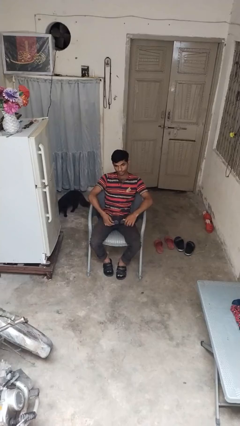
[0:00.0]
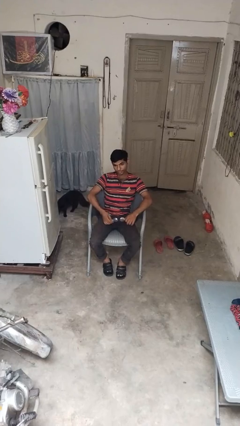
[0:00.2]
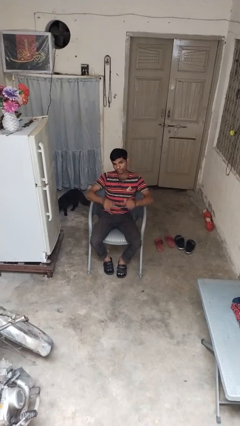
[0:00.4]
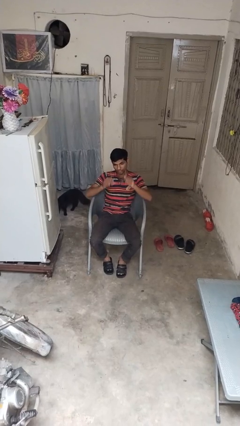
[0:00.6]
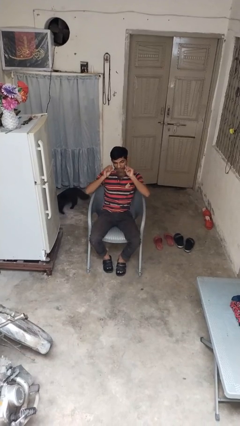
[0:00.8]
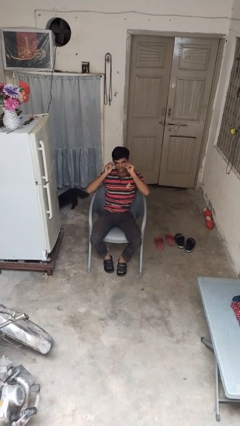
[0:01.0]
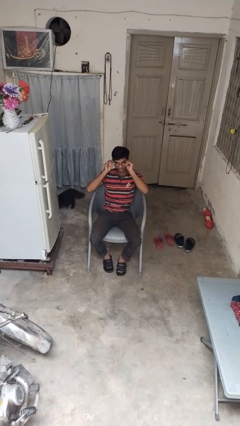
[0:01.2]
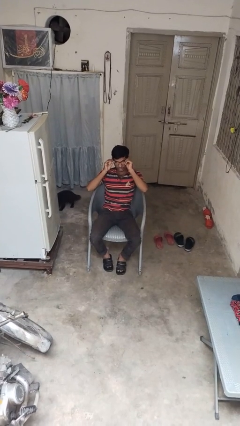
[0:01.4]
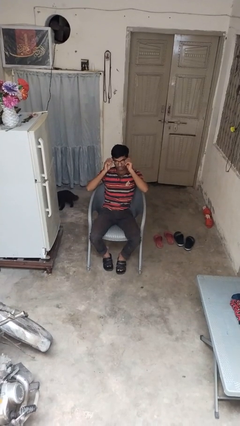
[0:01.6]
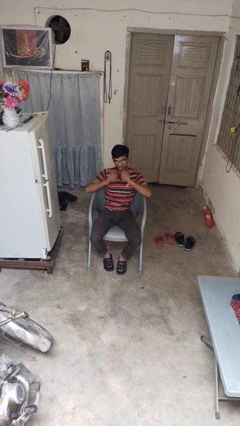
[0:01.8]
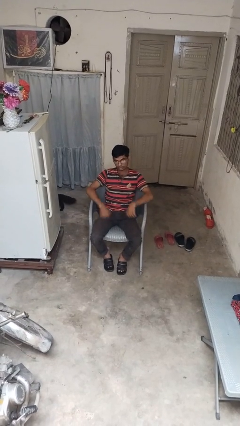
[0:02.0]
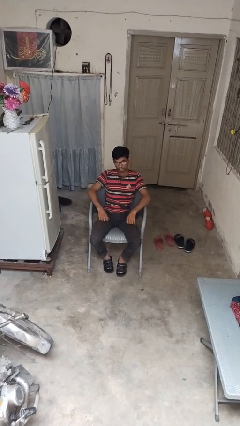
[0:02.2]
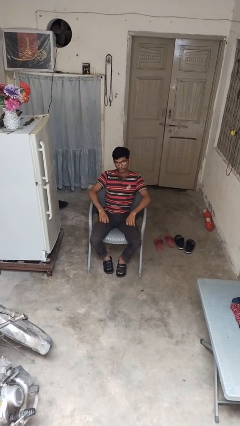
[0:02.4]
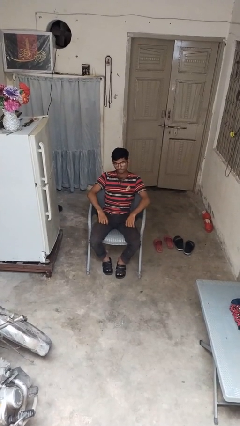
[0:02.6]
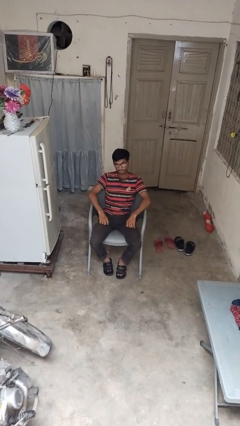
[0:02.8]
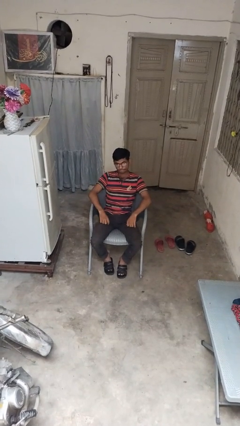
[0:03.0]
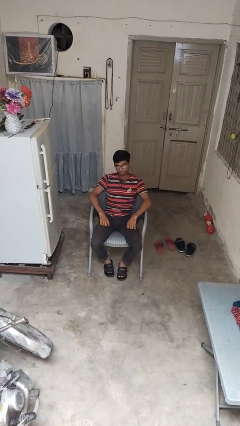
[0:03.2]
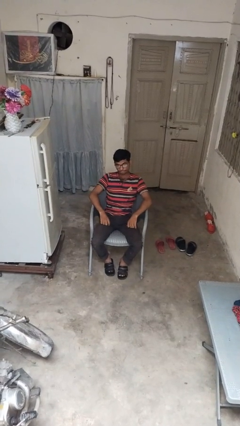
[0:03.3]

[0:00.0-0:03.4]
person puts on glasses

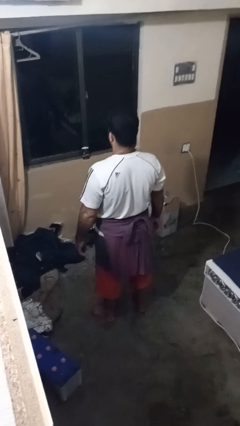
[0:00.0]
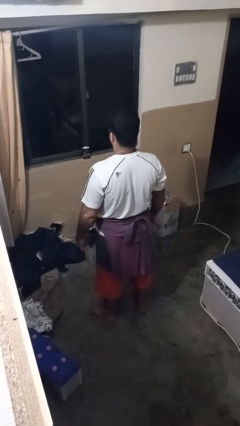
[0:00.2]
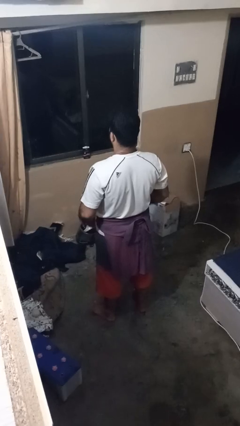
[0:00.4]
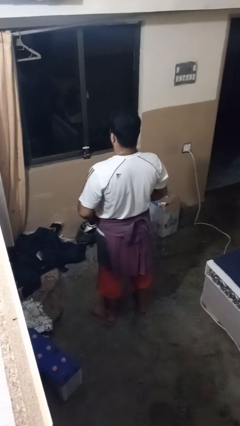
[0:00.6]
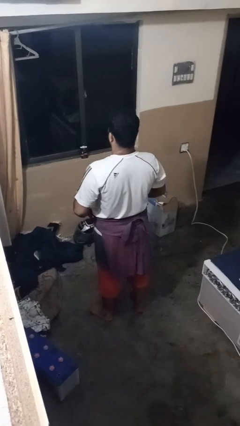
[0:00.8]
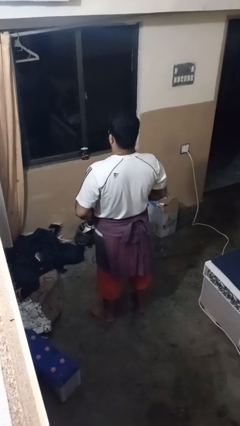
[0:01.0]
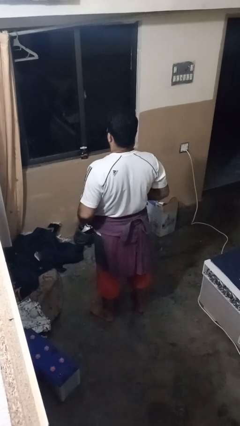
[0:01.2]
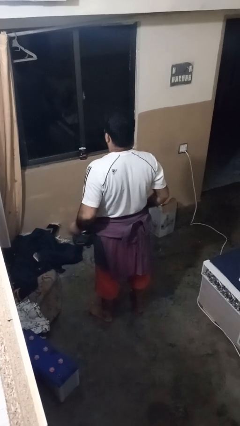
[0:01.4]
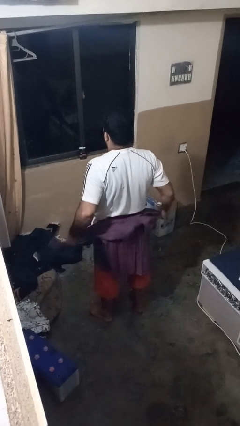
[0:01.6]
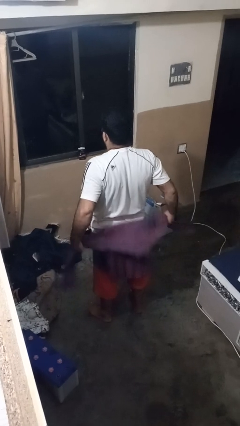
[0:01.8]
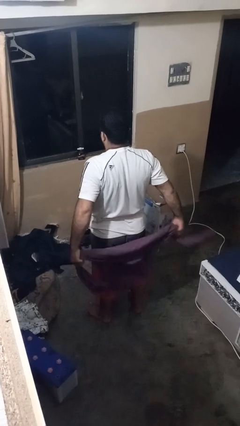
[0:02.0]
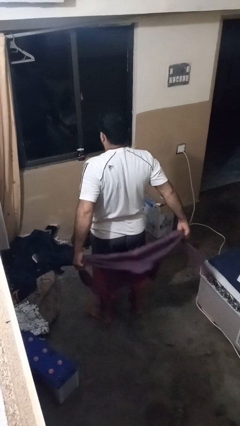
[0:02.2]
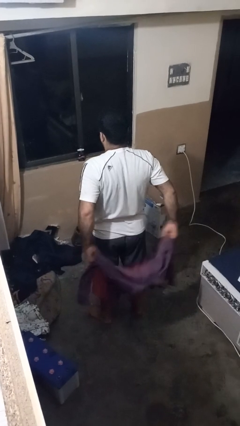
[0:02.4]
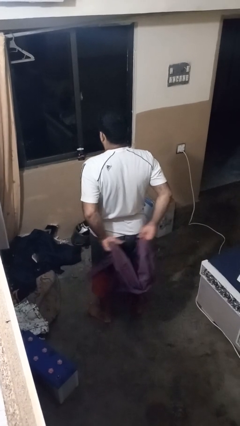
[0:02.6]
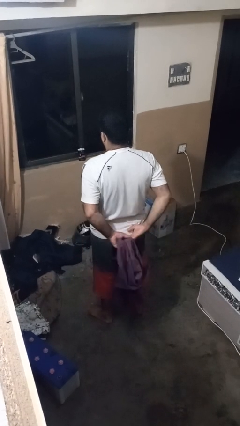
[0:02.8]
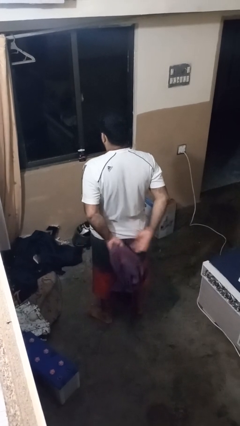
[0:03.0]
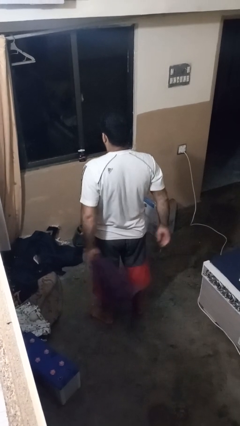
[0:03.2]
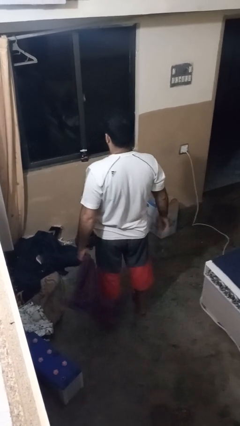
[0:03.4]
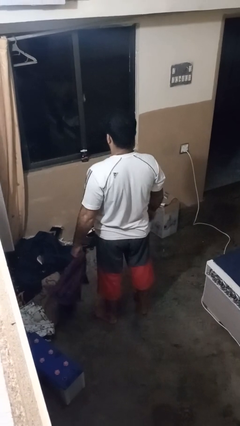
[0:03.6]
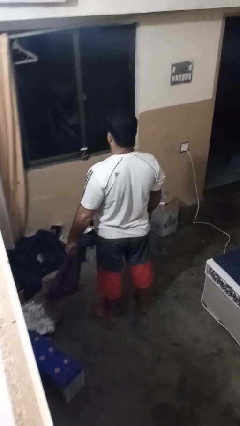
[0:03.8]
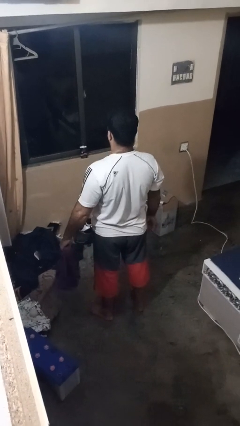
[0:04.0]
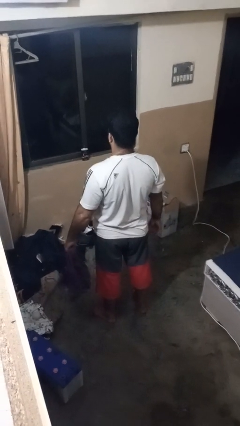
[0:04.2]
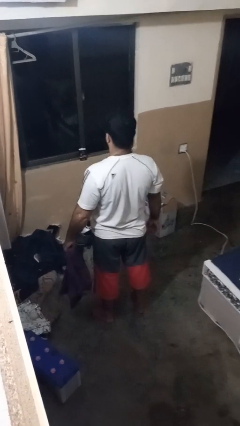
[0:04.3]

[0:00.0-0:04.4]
person unties jacket around waist

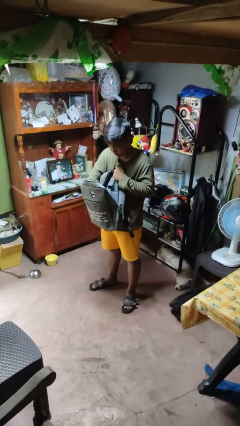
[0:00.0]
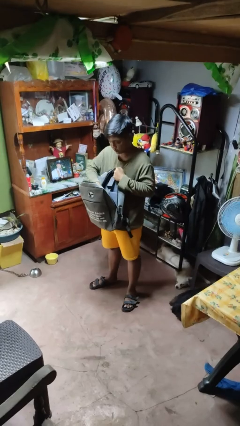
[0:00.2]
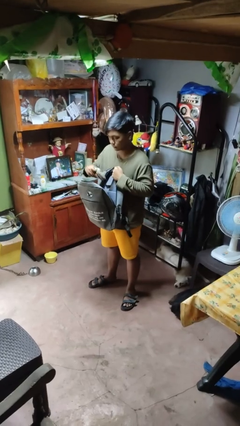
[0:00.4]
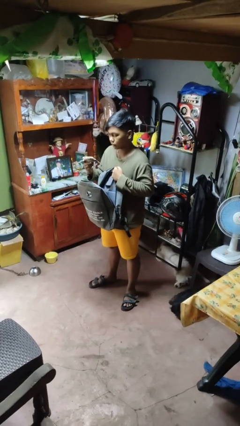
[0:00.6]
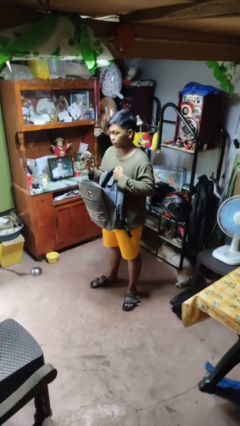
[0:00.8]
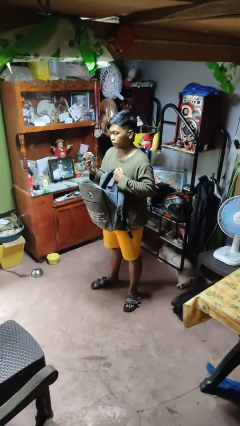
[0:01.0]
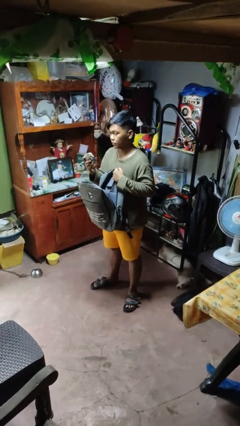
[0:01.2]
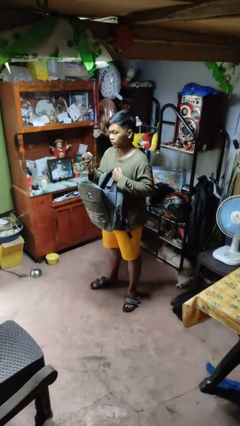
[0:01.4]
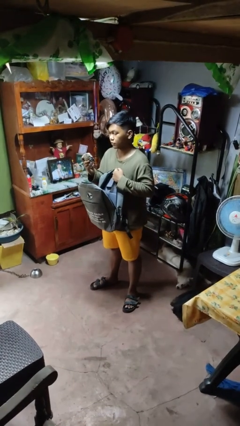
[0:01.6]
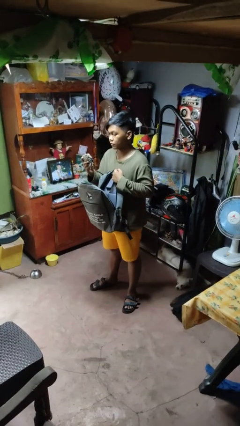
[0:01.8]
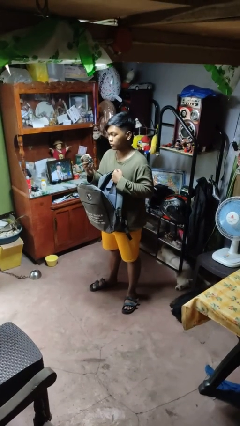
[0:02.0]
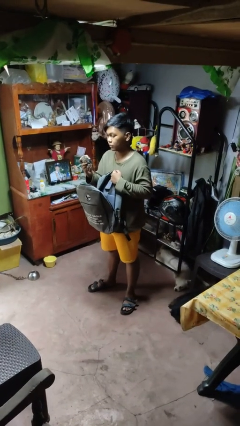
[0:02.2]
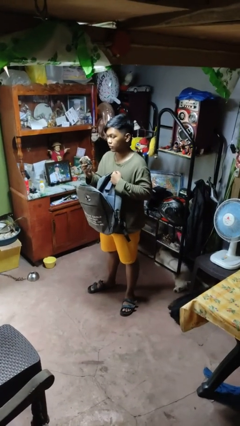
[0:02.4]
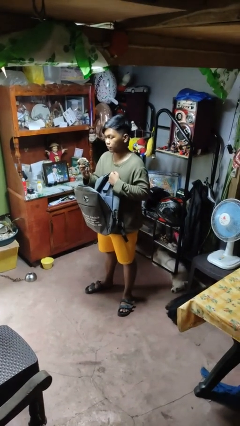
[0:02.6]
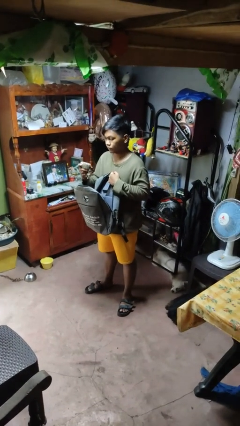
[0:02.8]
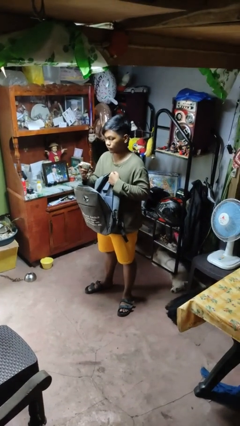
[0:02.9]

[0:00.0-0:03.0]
person takes object from backpack

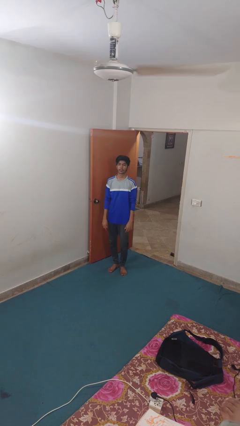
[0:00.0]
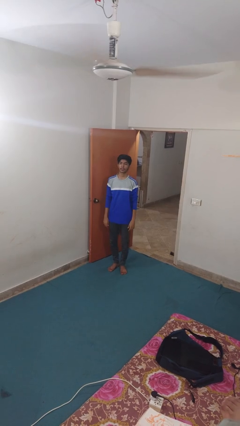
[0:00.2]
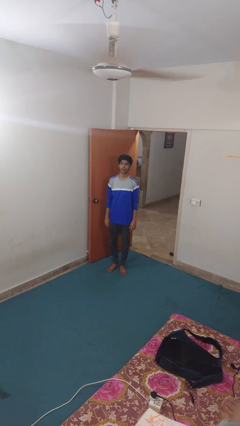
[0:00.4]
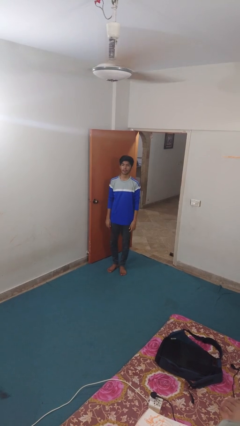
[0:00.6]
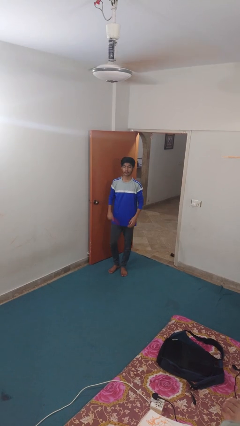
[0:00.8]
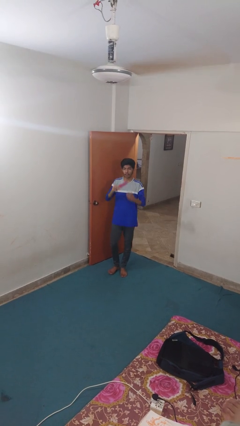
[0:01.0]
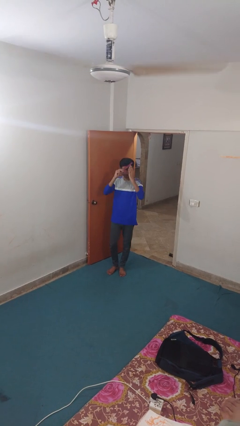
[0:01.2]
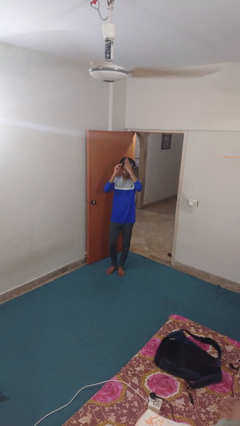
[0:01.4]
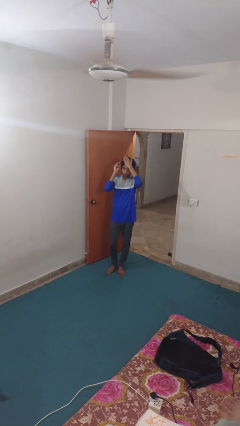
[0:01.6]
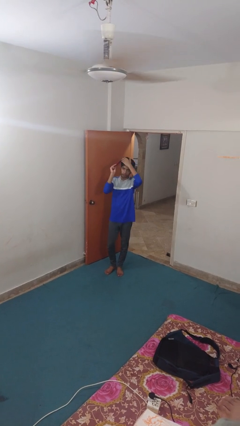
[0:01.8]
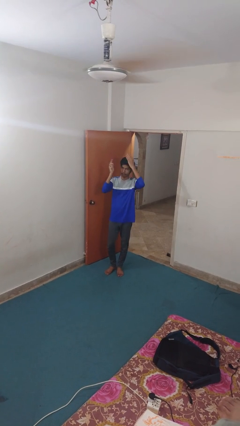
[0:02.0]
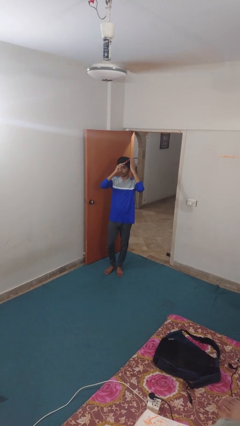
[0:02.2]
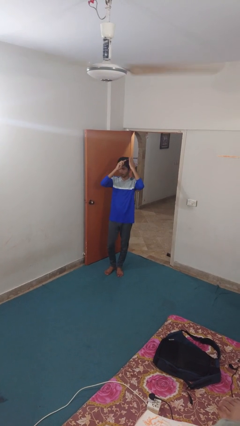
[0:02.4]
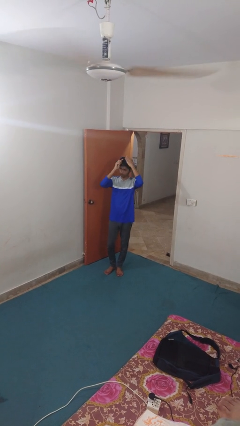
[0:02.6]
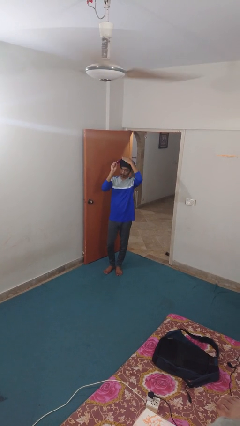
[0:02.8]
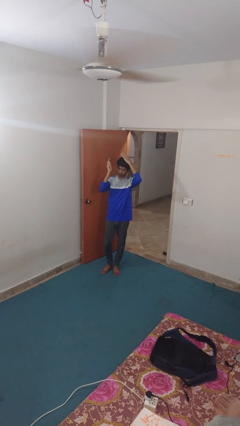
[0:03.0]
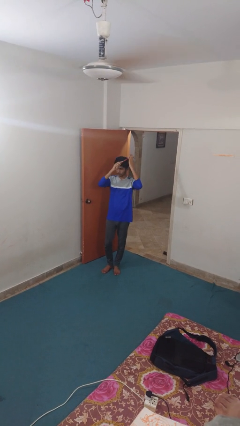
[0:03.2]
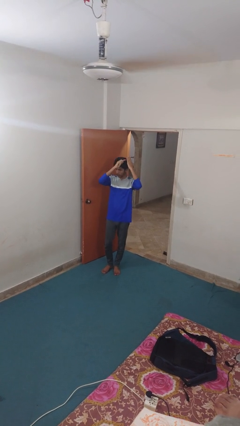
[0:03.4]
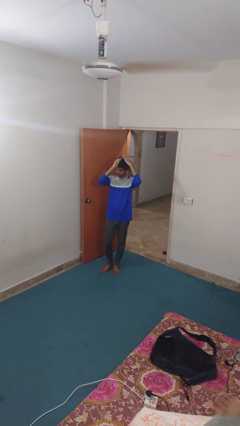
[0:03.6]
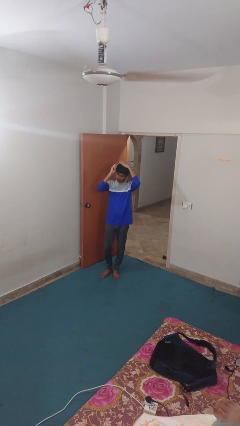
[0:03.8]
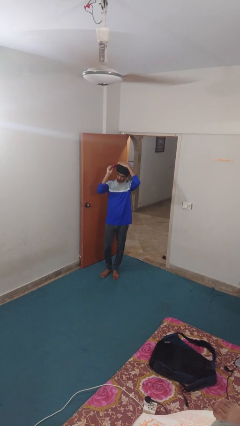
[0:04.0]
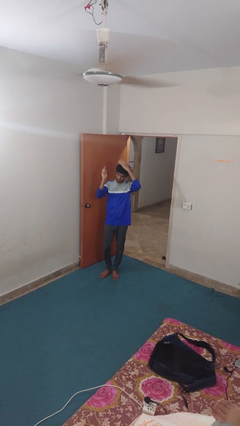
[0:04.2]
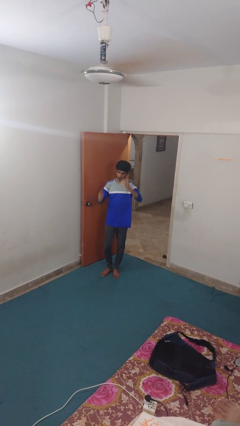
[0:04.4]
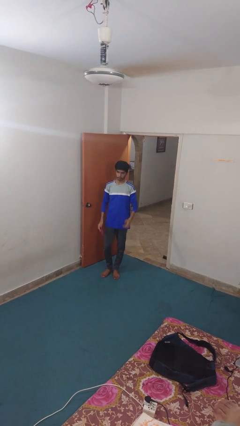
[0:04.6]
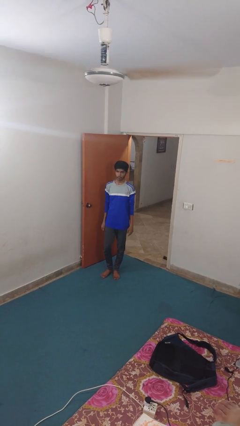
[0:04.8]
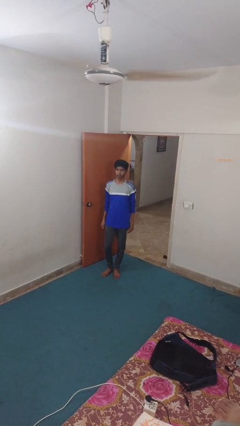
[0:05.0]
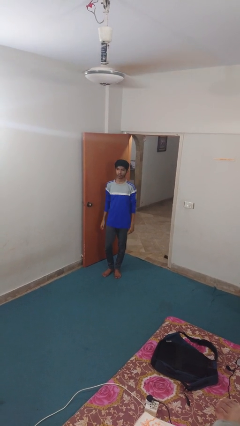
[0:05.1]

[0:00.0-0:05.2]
person brushes hair

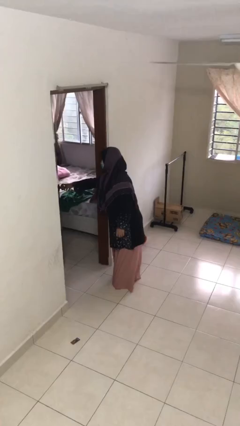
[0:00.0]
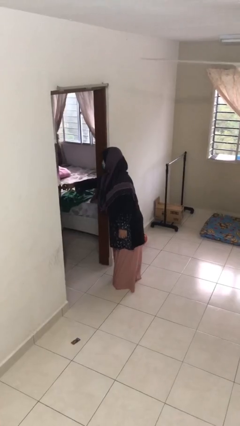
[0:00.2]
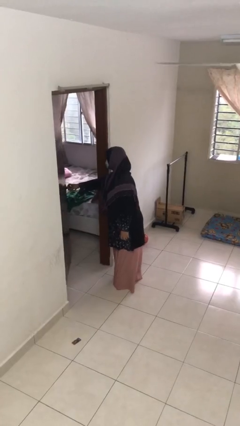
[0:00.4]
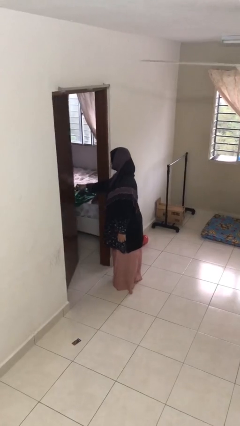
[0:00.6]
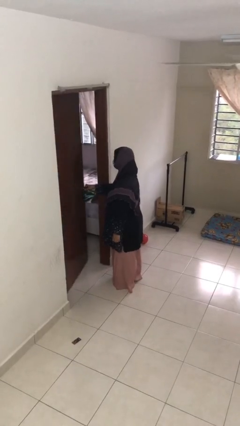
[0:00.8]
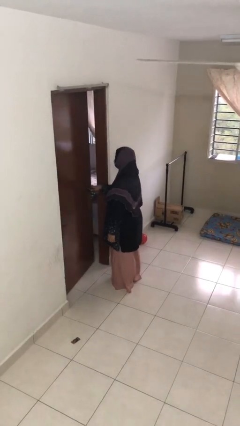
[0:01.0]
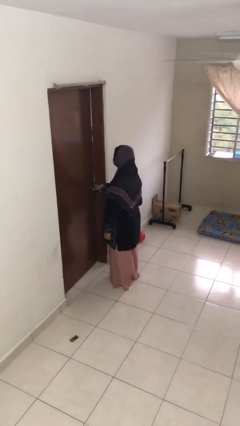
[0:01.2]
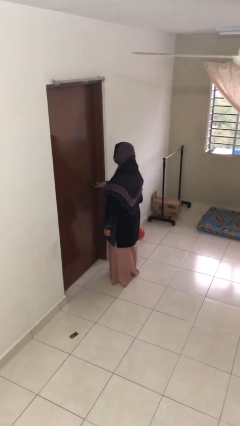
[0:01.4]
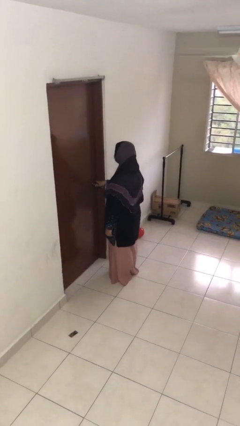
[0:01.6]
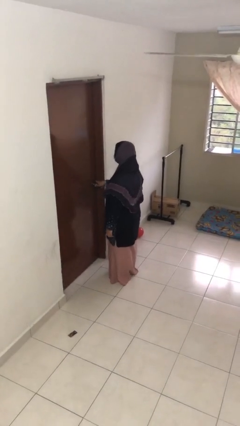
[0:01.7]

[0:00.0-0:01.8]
person closes facility door
